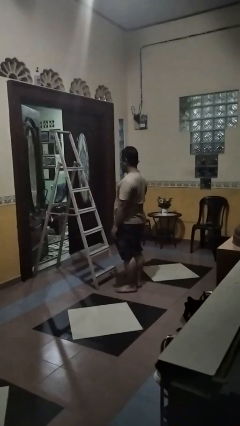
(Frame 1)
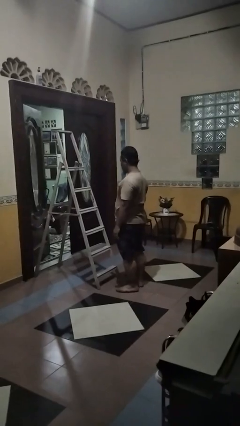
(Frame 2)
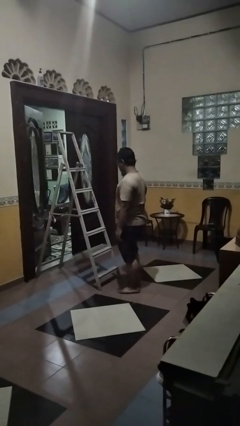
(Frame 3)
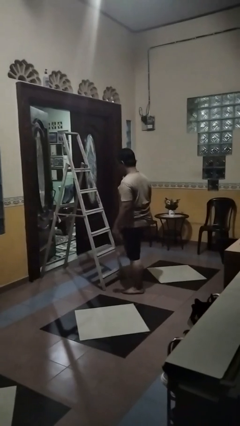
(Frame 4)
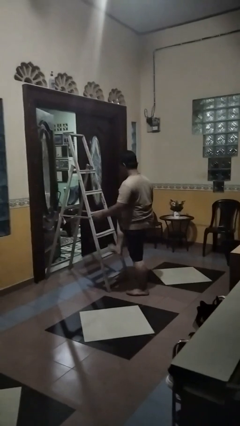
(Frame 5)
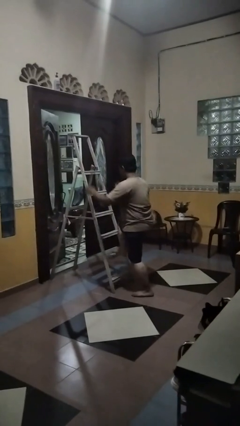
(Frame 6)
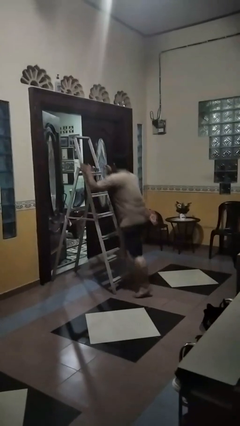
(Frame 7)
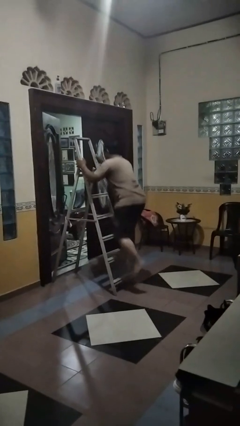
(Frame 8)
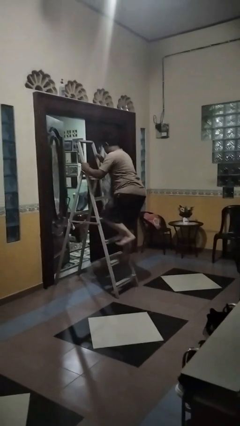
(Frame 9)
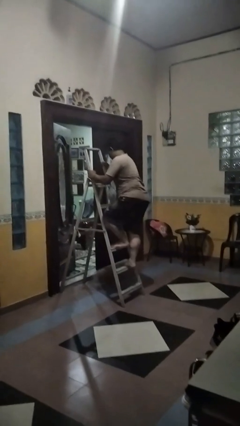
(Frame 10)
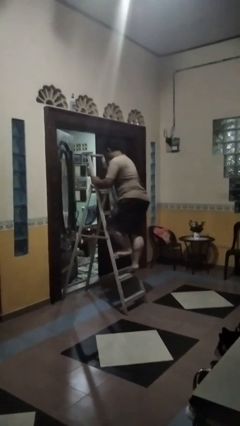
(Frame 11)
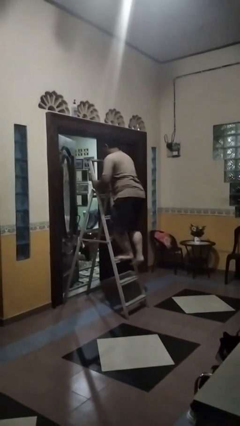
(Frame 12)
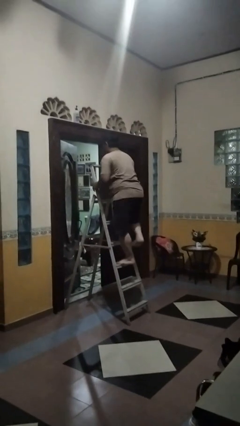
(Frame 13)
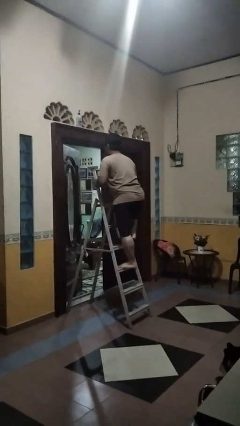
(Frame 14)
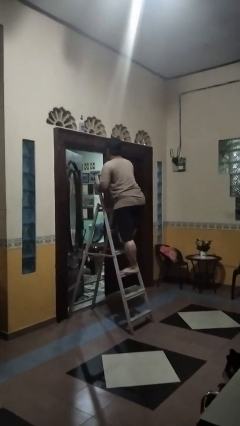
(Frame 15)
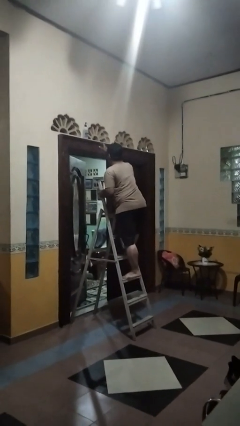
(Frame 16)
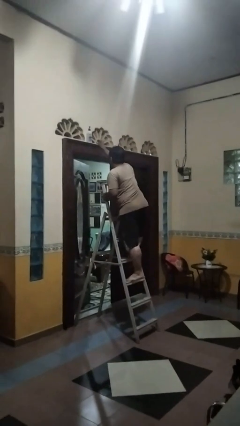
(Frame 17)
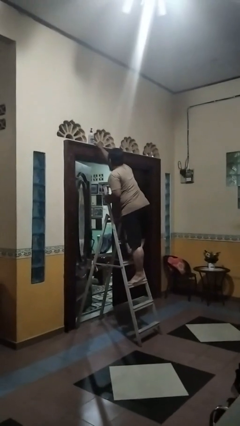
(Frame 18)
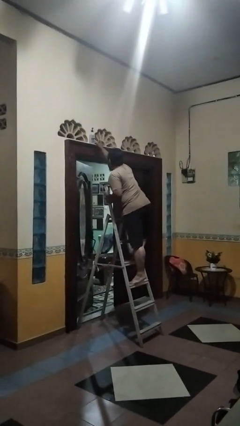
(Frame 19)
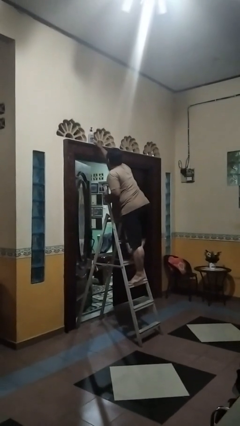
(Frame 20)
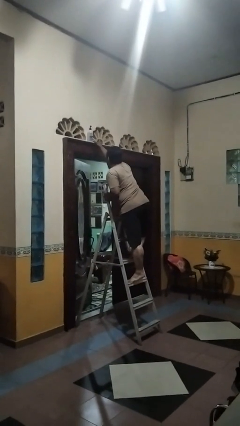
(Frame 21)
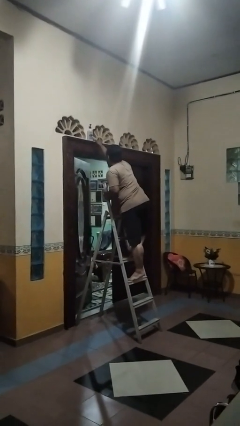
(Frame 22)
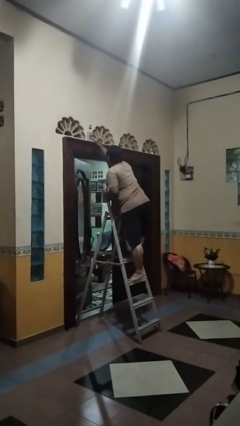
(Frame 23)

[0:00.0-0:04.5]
person climbs up ladder

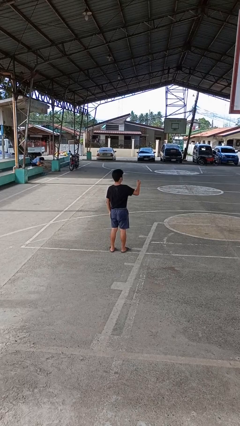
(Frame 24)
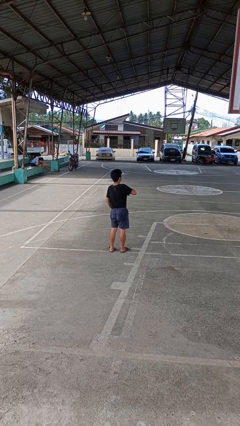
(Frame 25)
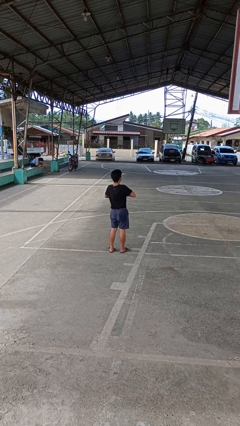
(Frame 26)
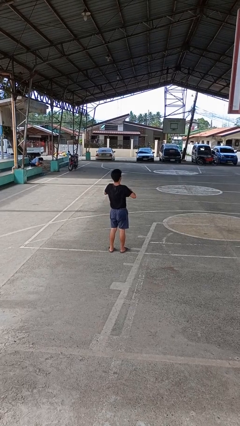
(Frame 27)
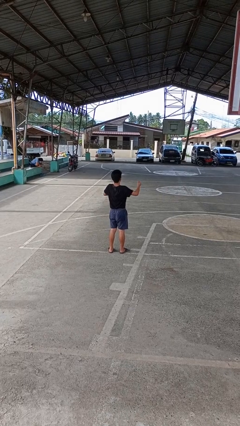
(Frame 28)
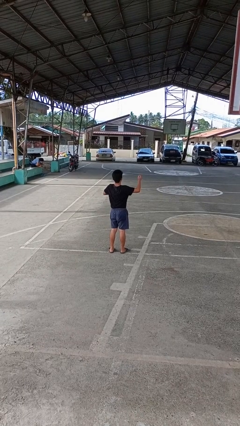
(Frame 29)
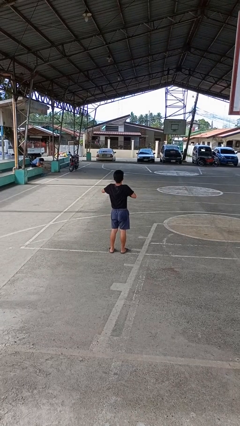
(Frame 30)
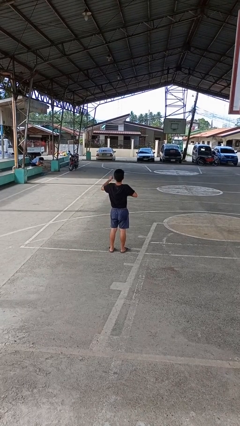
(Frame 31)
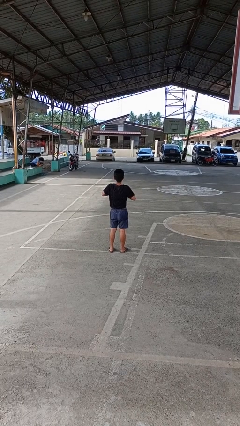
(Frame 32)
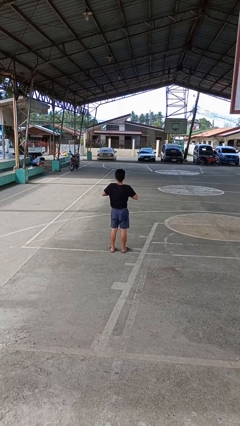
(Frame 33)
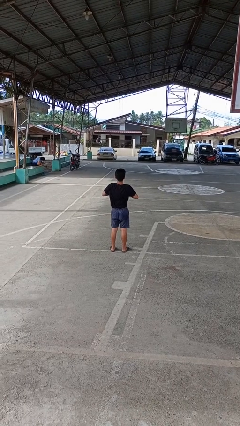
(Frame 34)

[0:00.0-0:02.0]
person drums on chest

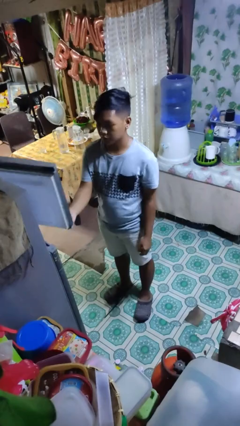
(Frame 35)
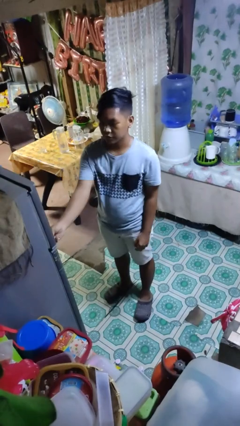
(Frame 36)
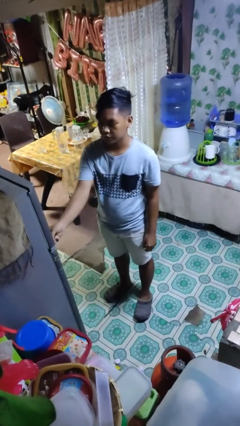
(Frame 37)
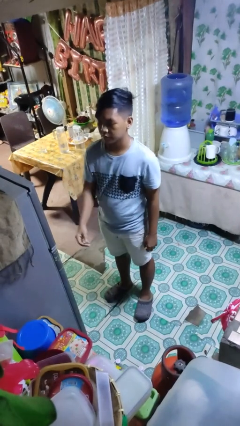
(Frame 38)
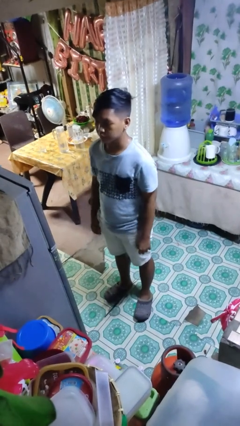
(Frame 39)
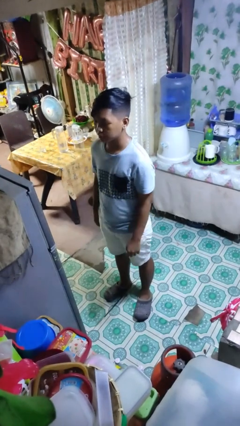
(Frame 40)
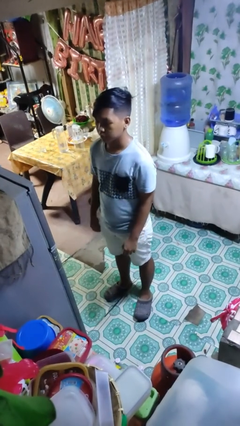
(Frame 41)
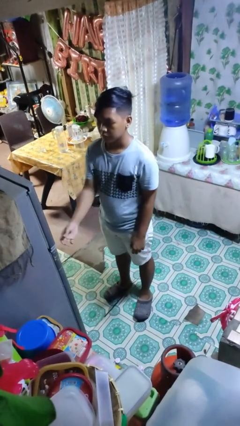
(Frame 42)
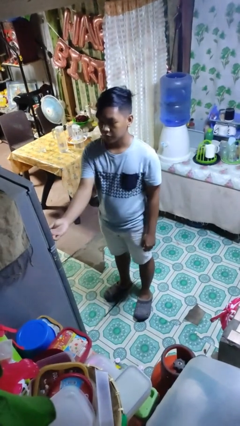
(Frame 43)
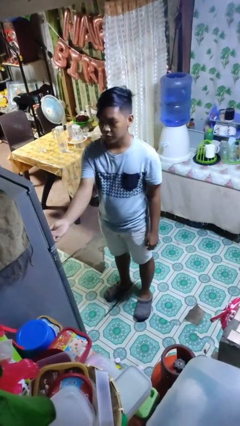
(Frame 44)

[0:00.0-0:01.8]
person closes refrigerator

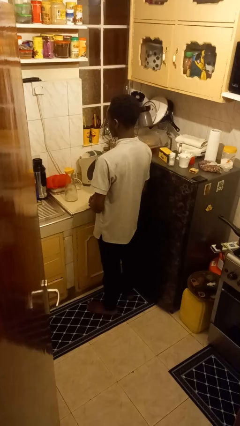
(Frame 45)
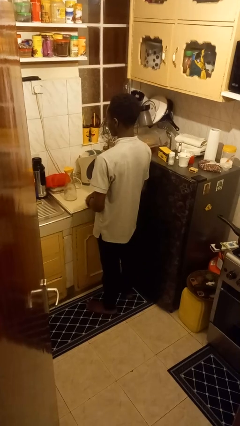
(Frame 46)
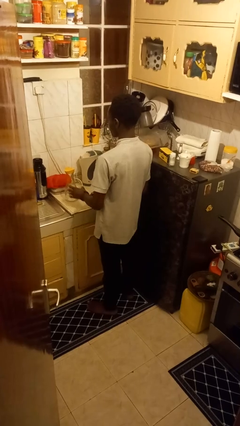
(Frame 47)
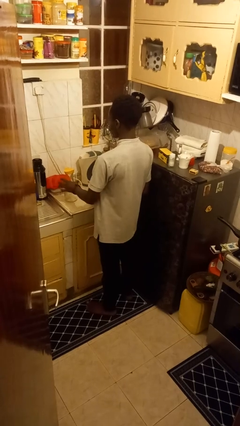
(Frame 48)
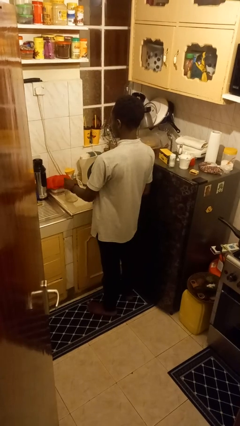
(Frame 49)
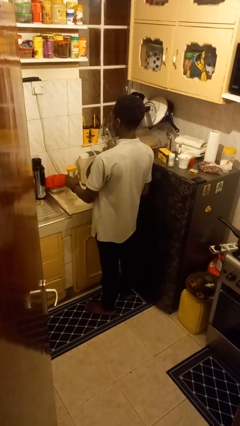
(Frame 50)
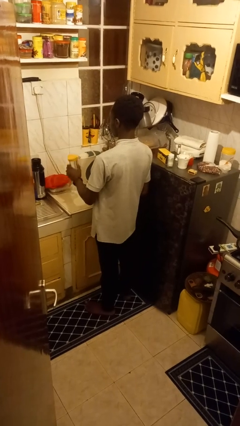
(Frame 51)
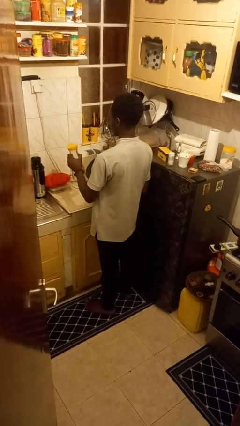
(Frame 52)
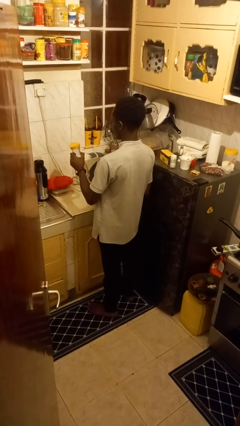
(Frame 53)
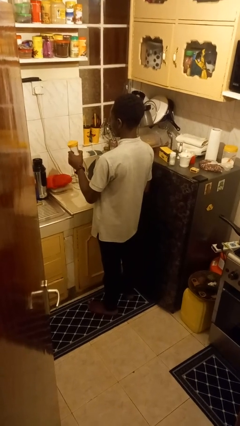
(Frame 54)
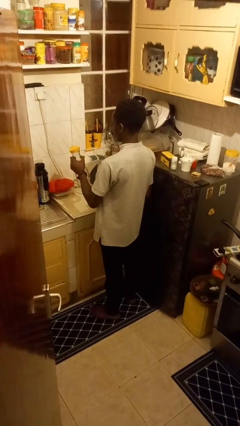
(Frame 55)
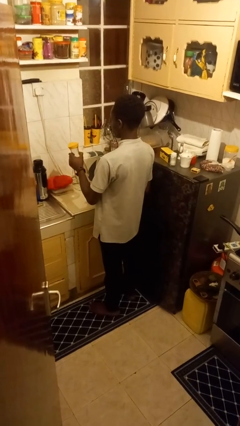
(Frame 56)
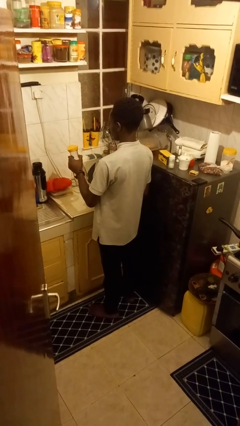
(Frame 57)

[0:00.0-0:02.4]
person picks up object from countertop

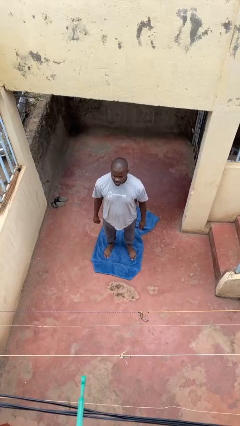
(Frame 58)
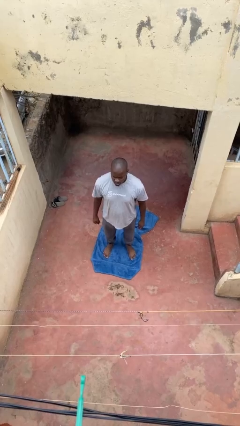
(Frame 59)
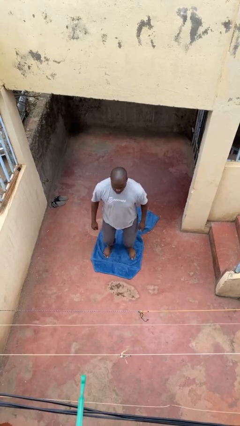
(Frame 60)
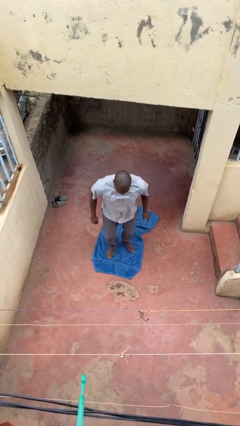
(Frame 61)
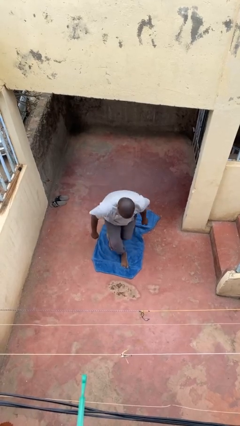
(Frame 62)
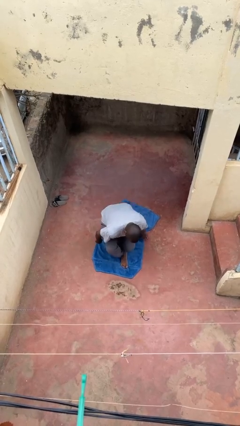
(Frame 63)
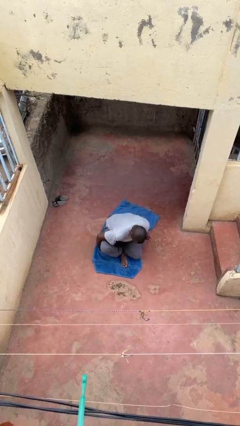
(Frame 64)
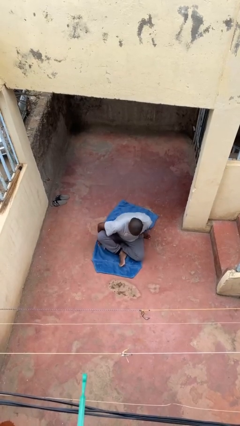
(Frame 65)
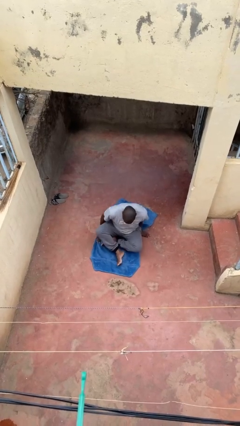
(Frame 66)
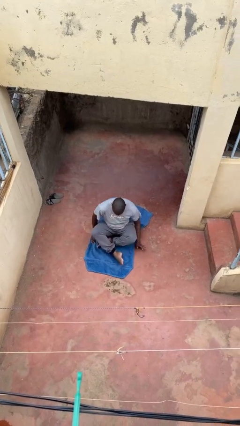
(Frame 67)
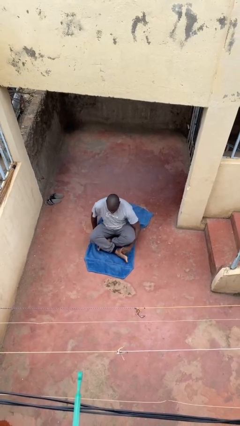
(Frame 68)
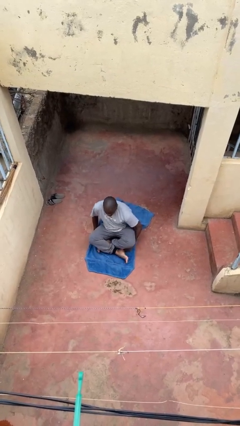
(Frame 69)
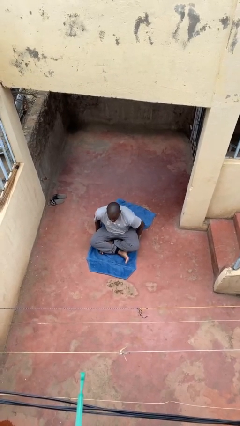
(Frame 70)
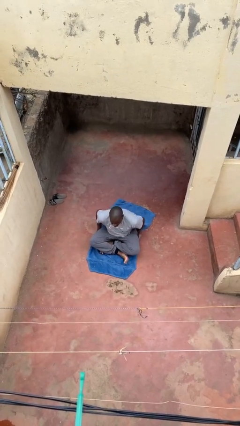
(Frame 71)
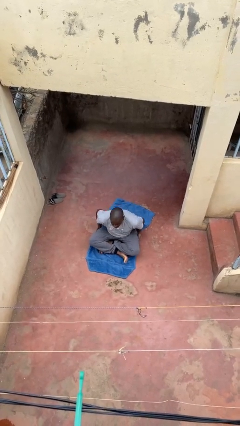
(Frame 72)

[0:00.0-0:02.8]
person sits crisscross

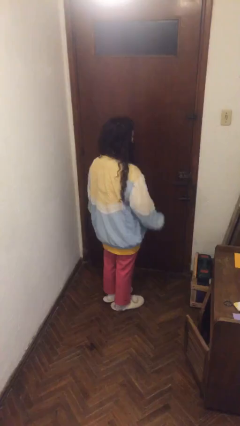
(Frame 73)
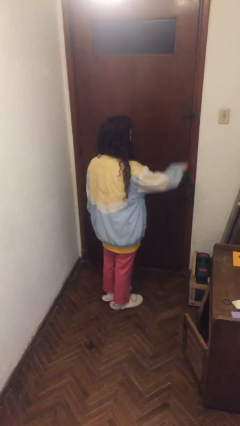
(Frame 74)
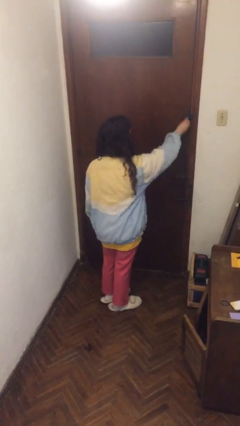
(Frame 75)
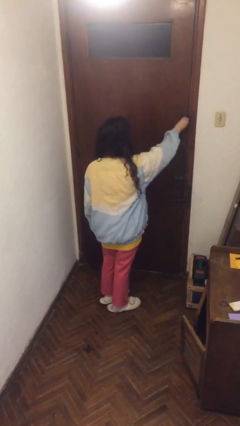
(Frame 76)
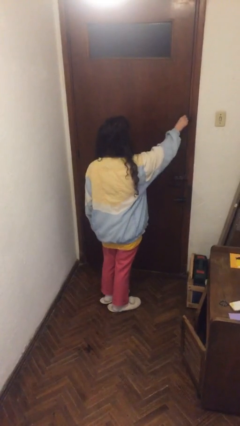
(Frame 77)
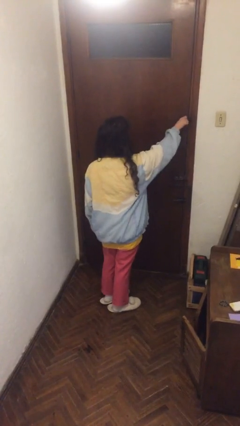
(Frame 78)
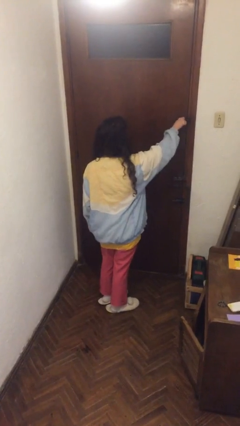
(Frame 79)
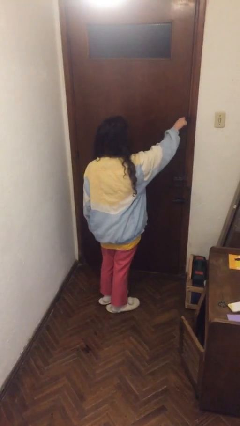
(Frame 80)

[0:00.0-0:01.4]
person unlocks door with keys

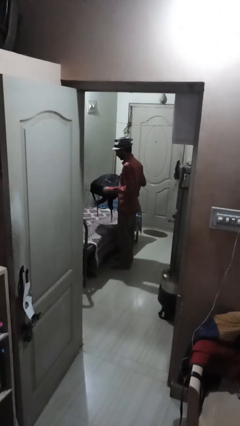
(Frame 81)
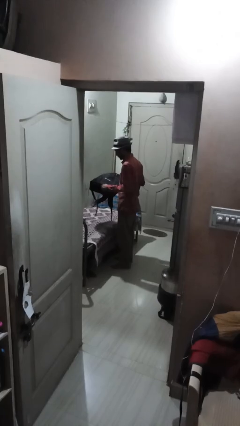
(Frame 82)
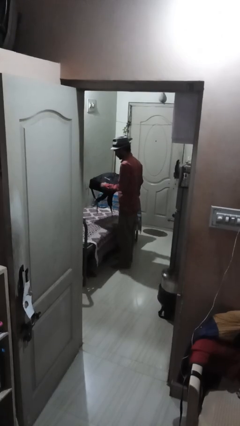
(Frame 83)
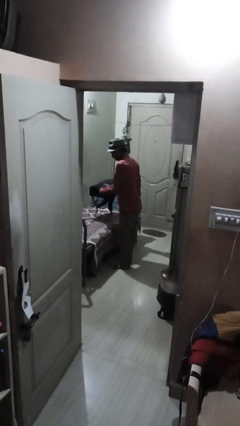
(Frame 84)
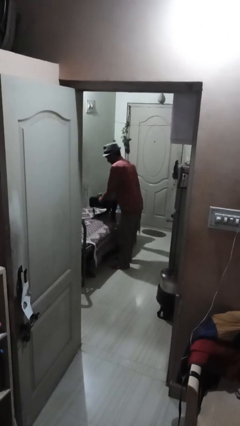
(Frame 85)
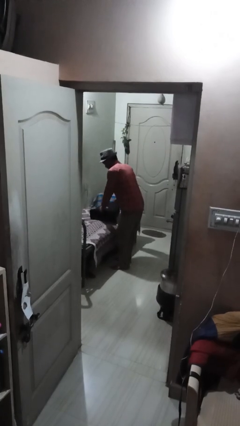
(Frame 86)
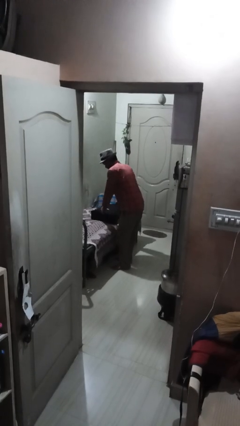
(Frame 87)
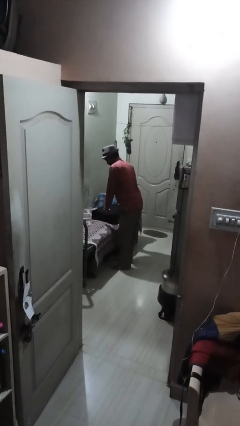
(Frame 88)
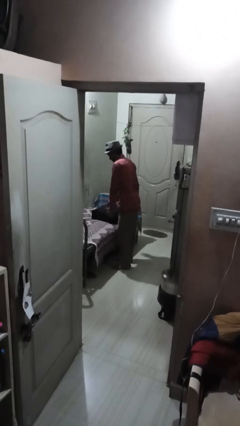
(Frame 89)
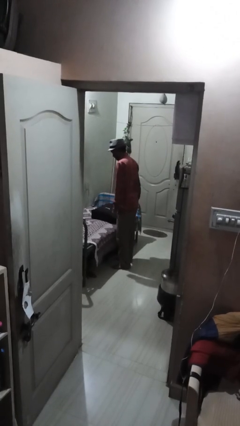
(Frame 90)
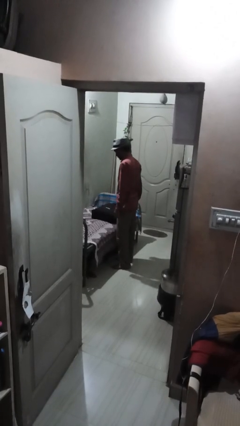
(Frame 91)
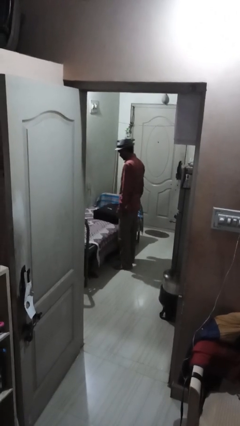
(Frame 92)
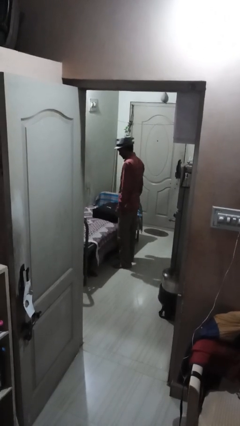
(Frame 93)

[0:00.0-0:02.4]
person puts down object on couch

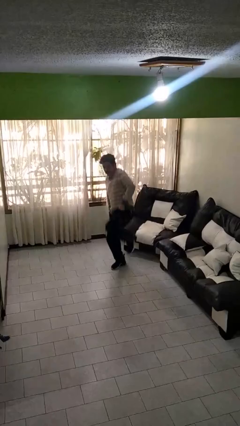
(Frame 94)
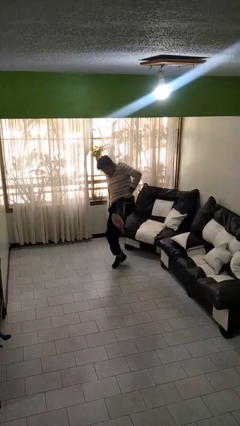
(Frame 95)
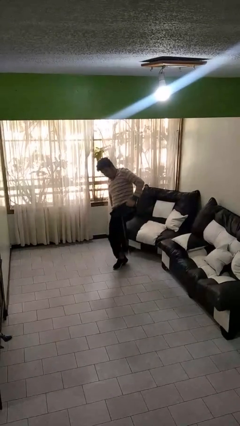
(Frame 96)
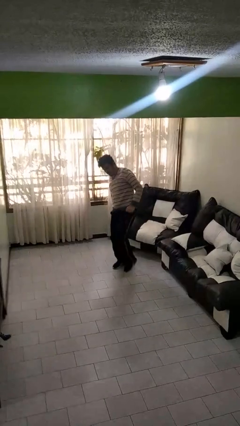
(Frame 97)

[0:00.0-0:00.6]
person karate kicks
